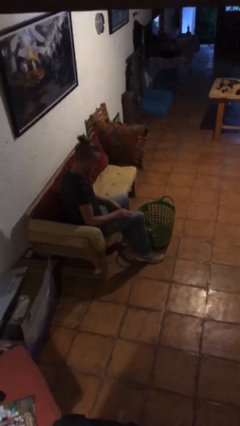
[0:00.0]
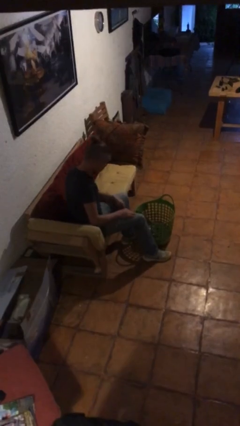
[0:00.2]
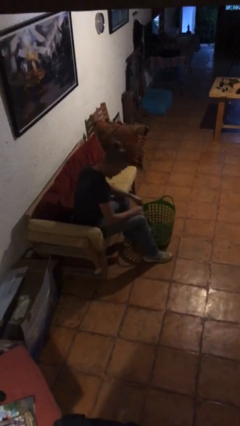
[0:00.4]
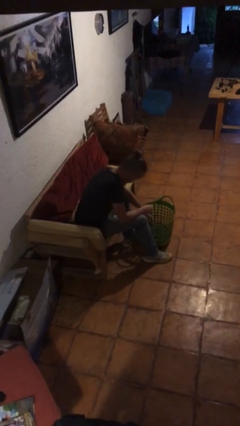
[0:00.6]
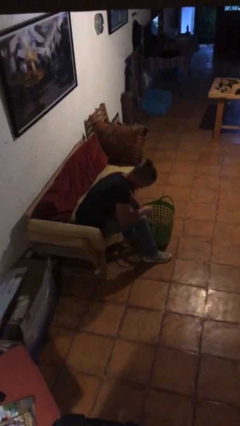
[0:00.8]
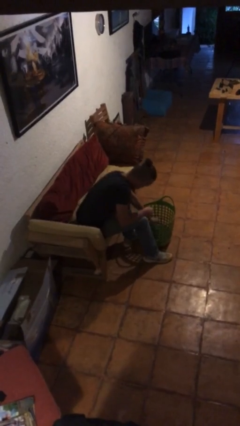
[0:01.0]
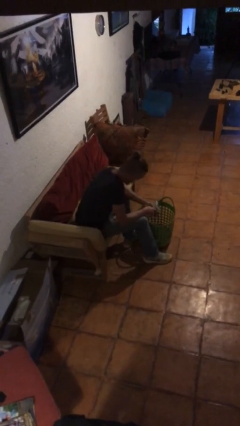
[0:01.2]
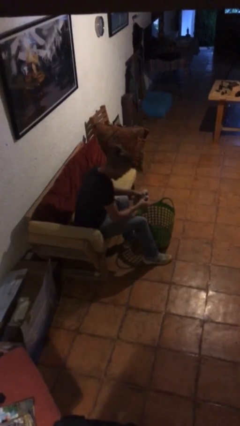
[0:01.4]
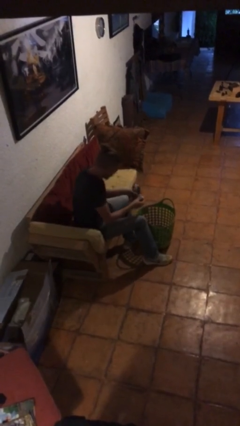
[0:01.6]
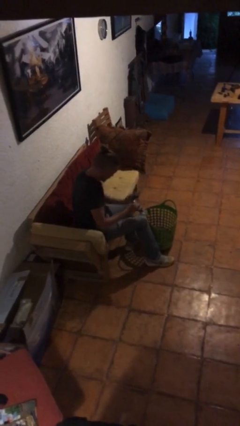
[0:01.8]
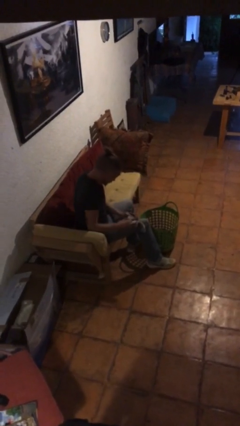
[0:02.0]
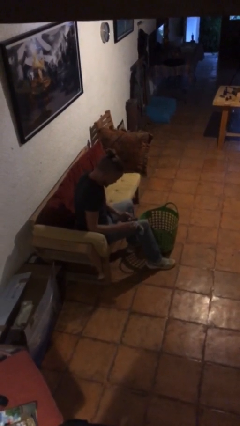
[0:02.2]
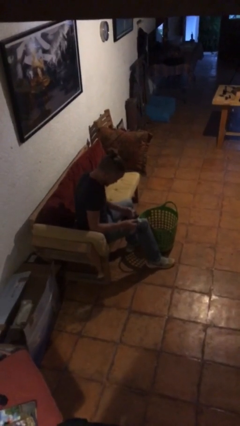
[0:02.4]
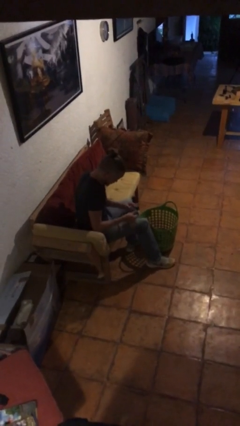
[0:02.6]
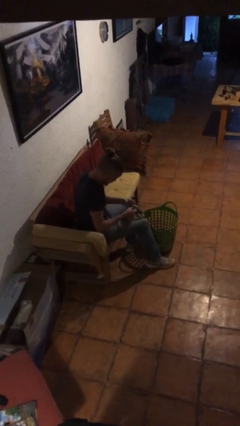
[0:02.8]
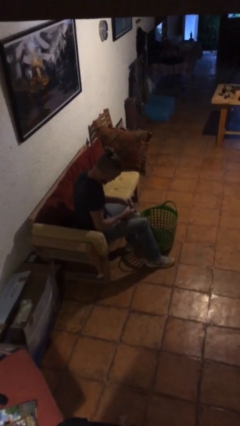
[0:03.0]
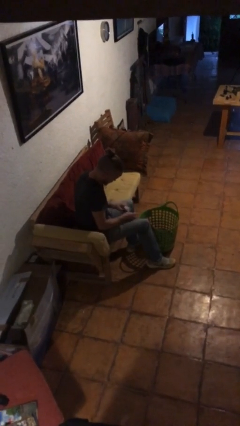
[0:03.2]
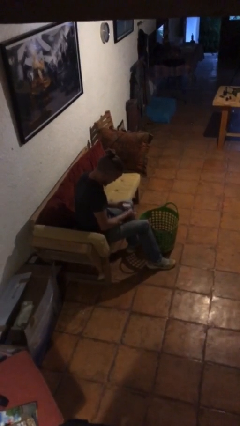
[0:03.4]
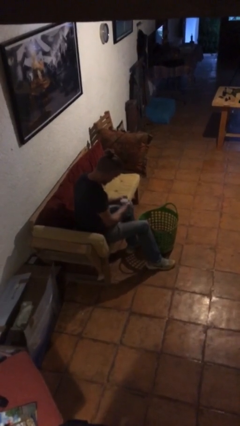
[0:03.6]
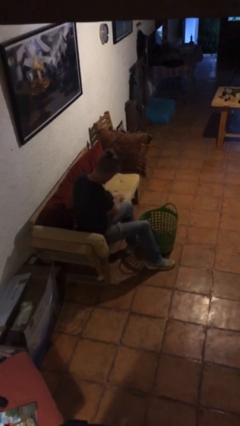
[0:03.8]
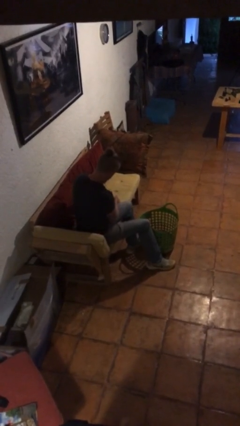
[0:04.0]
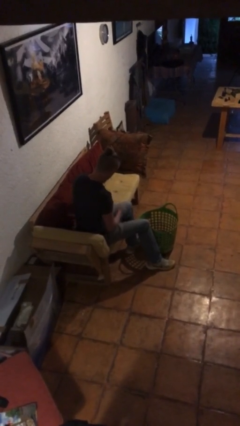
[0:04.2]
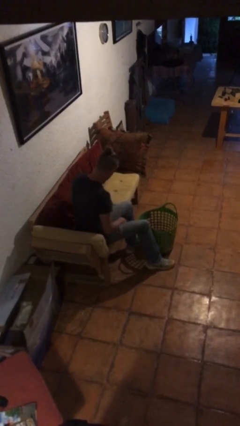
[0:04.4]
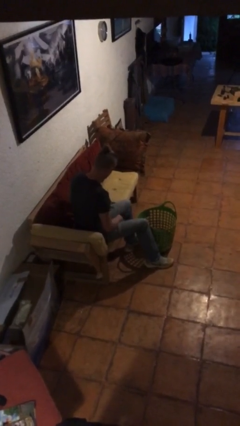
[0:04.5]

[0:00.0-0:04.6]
person folds socks

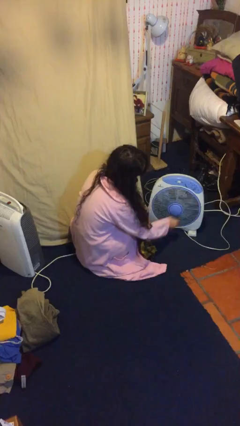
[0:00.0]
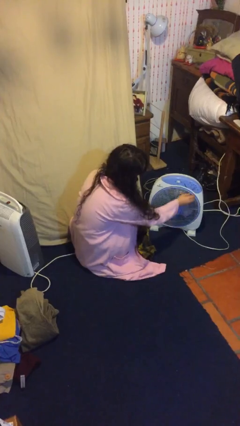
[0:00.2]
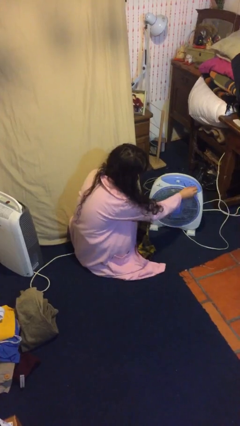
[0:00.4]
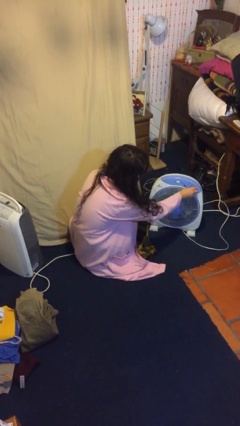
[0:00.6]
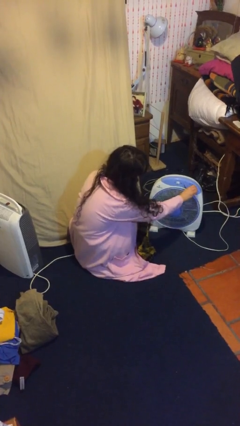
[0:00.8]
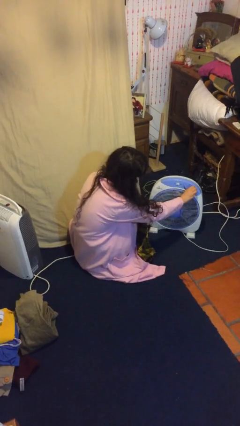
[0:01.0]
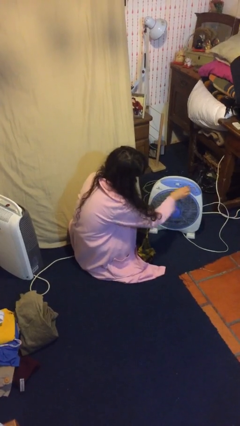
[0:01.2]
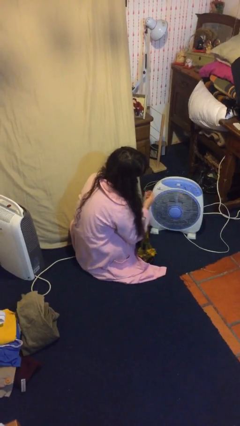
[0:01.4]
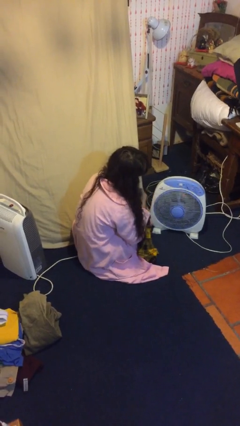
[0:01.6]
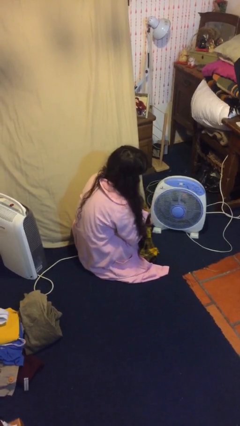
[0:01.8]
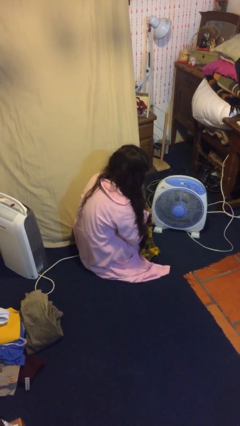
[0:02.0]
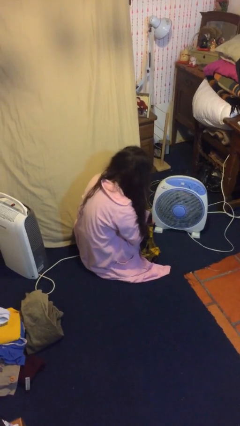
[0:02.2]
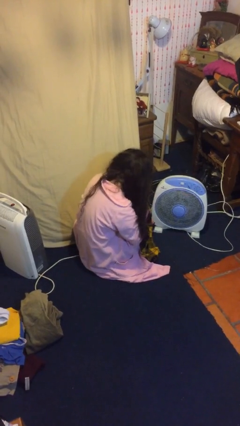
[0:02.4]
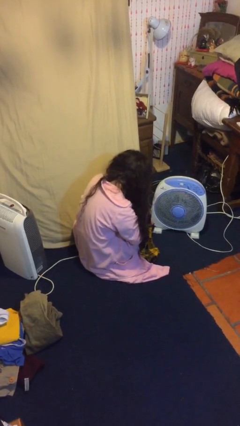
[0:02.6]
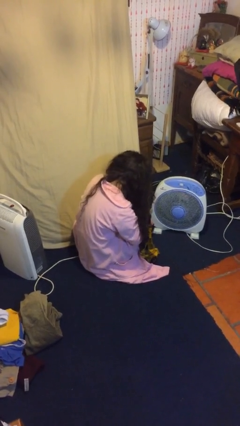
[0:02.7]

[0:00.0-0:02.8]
person turns on fan

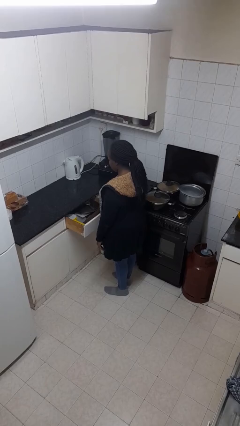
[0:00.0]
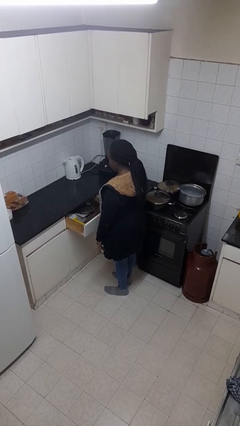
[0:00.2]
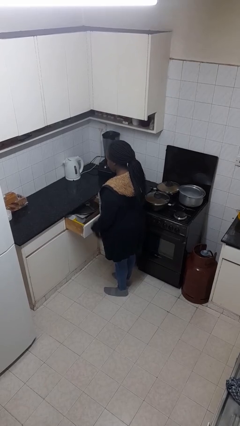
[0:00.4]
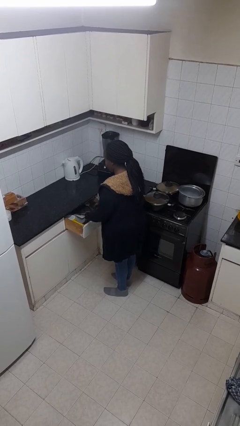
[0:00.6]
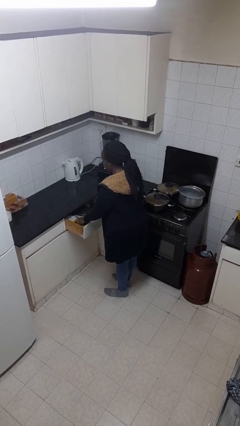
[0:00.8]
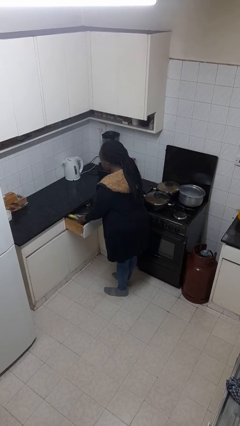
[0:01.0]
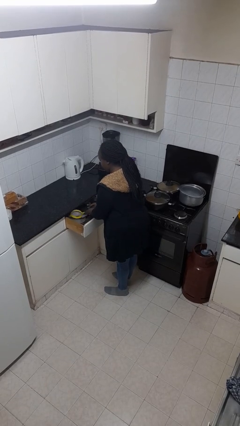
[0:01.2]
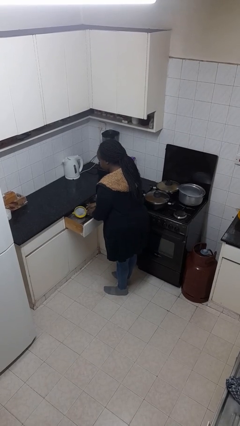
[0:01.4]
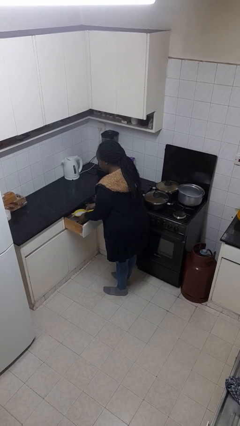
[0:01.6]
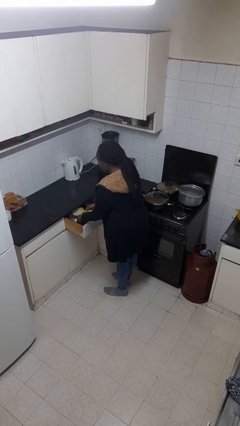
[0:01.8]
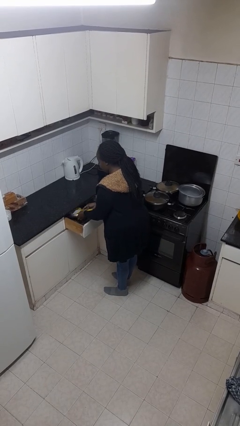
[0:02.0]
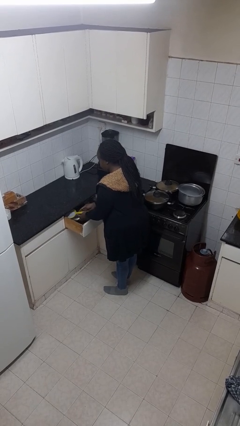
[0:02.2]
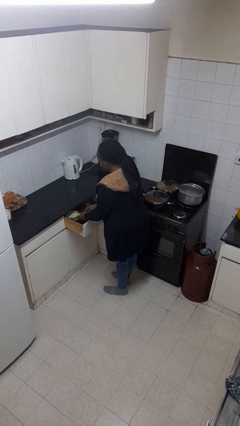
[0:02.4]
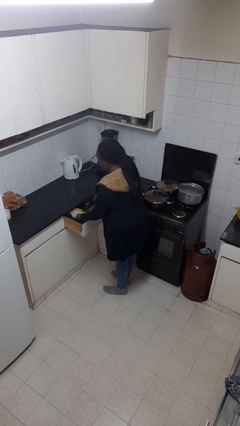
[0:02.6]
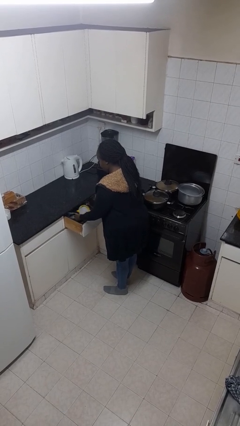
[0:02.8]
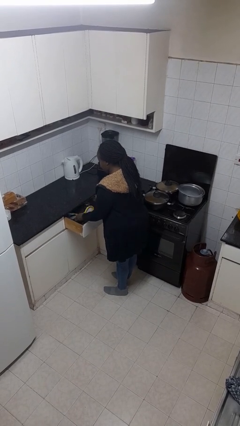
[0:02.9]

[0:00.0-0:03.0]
person searches in kitchen drawer

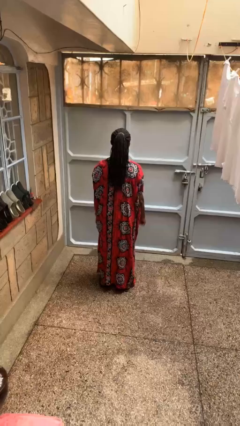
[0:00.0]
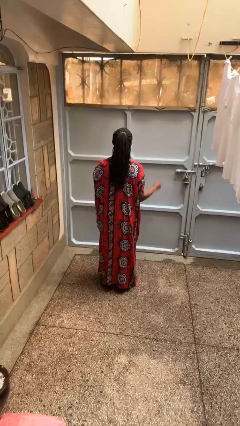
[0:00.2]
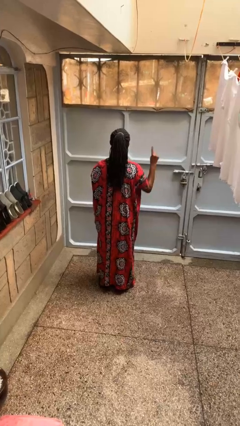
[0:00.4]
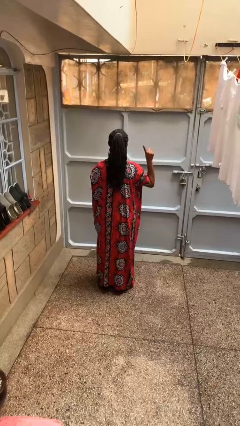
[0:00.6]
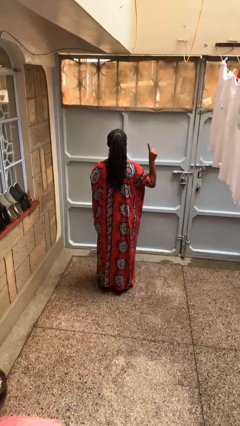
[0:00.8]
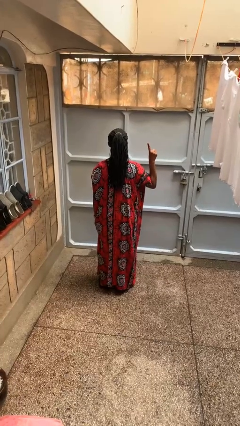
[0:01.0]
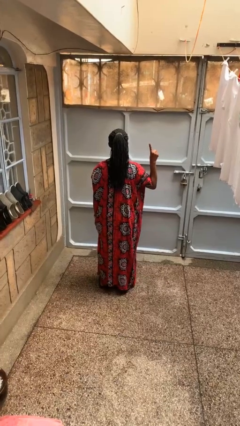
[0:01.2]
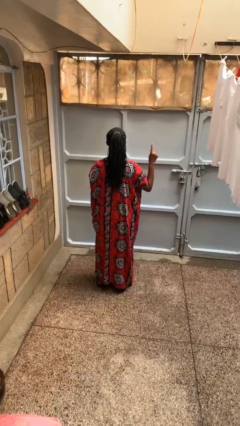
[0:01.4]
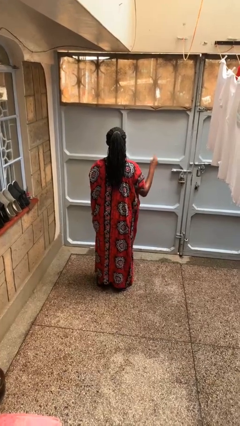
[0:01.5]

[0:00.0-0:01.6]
person gestures number one

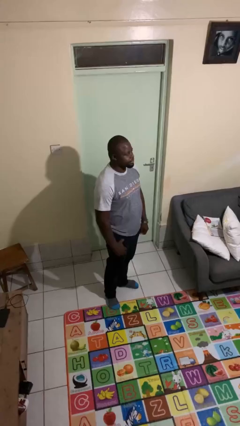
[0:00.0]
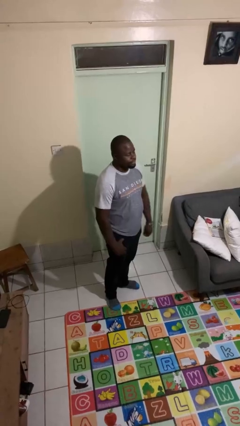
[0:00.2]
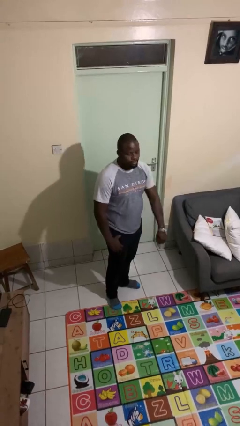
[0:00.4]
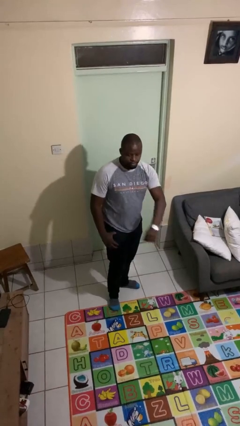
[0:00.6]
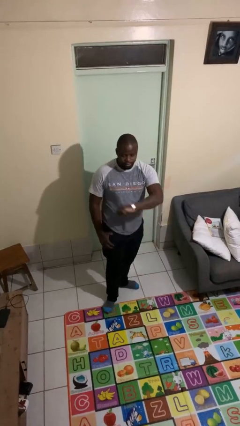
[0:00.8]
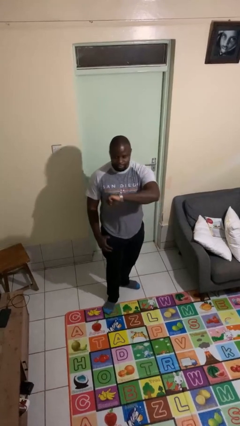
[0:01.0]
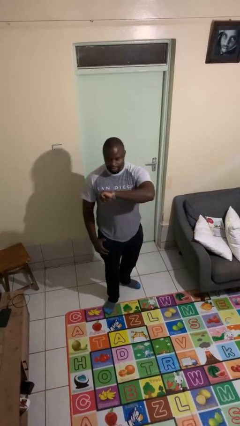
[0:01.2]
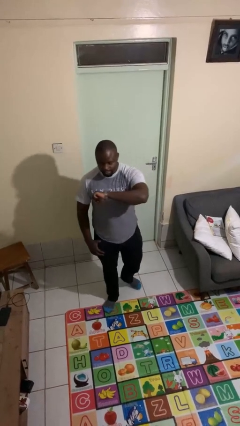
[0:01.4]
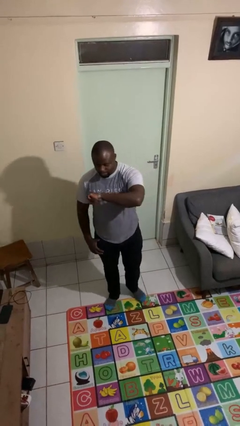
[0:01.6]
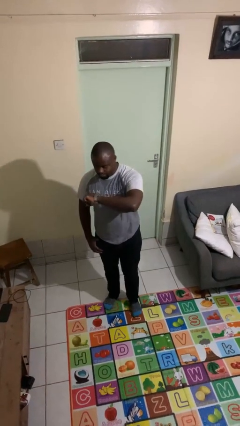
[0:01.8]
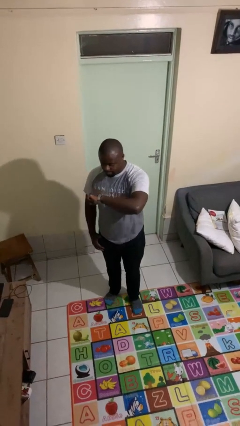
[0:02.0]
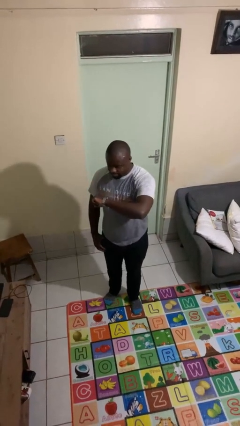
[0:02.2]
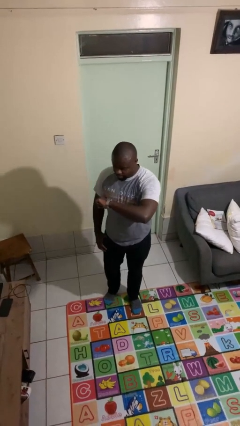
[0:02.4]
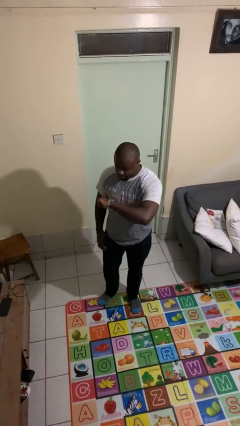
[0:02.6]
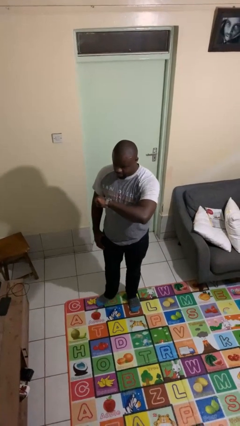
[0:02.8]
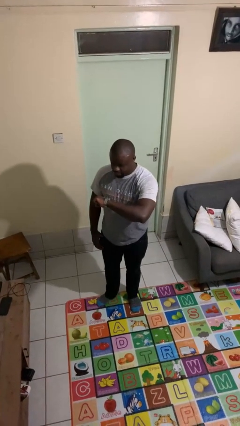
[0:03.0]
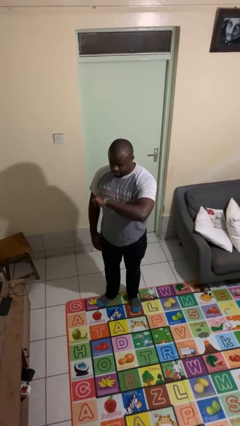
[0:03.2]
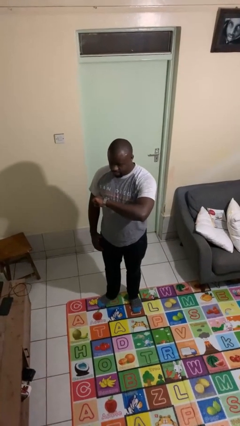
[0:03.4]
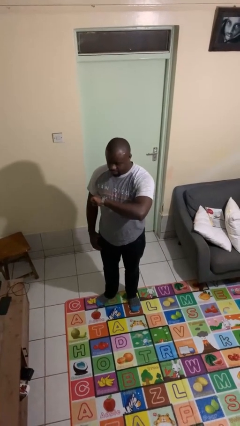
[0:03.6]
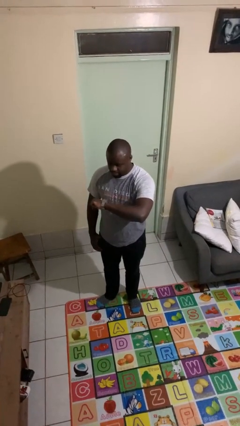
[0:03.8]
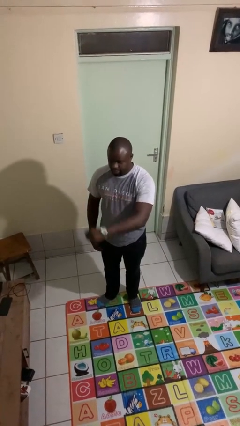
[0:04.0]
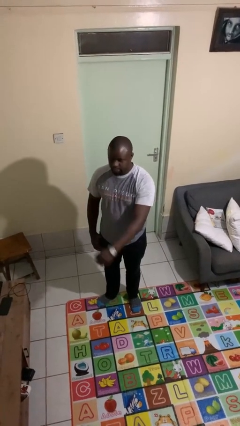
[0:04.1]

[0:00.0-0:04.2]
person looks at wristwatch

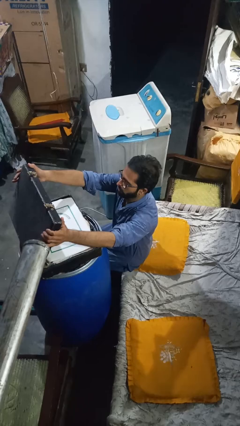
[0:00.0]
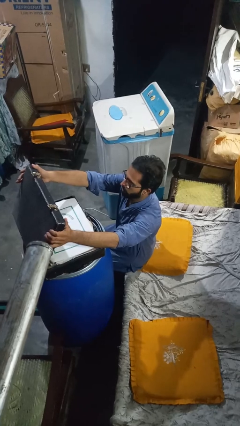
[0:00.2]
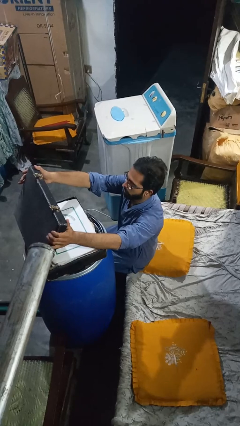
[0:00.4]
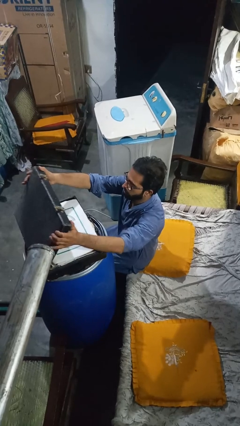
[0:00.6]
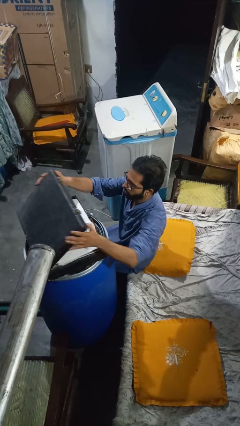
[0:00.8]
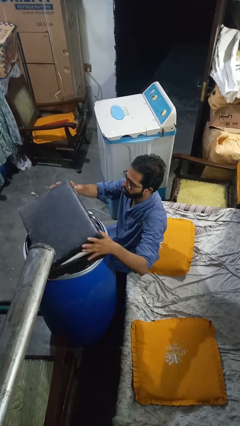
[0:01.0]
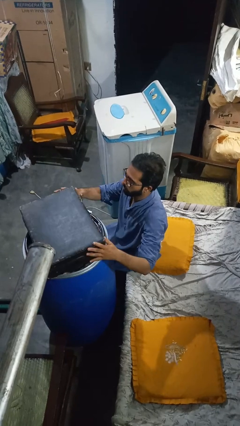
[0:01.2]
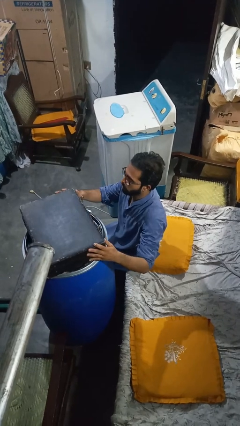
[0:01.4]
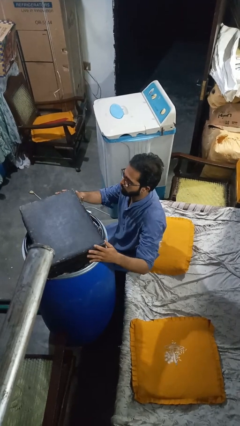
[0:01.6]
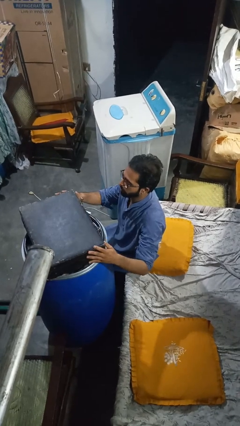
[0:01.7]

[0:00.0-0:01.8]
person closes suitcase
